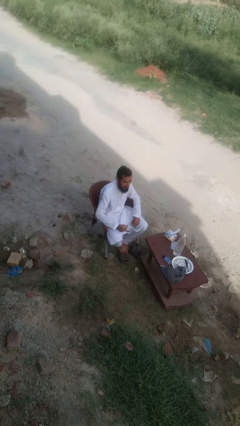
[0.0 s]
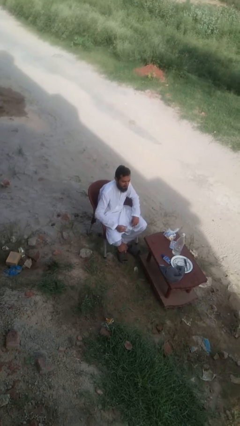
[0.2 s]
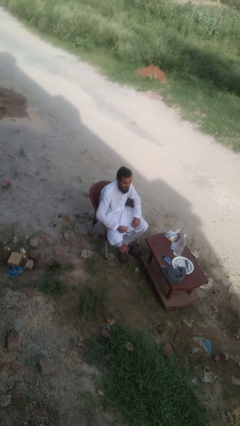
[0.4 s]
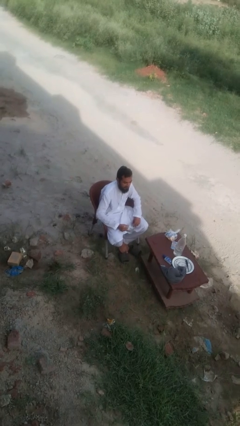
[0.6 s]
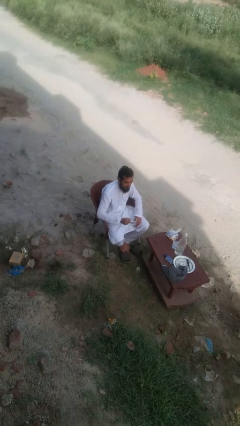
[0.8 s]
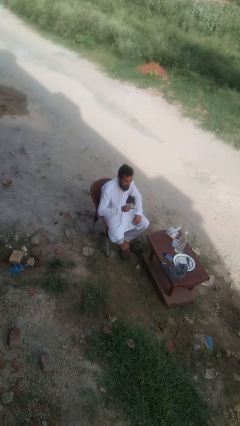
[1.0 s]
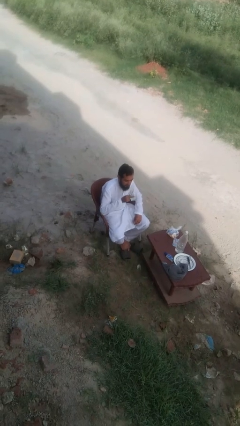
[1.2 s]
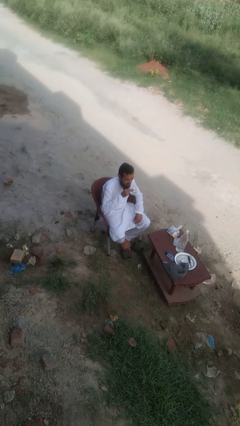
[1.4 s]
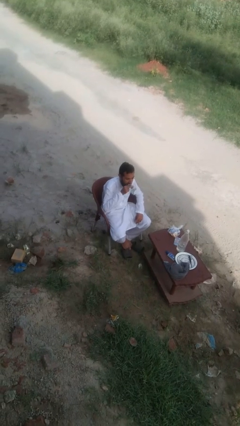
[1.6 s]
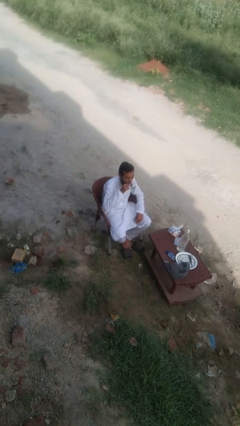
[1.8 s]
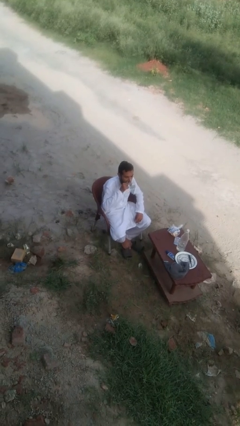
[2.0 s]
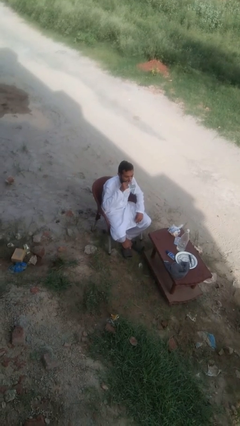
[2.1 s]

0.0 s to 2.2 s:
person drinks from mug

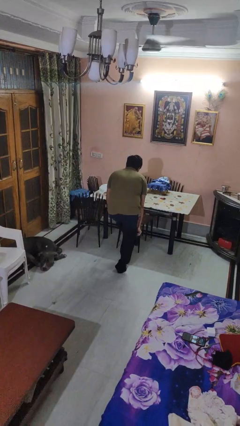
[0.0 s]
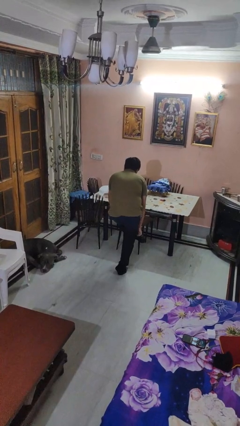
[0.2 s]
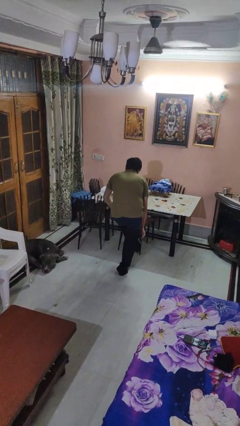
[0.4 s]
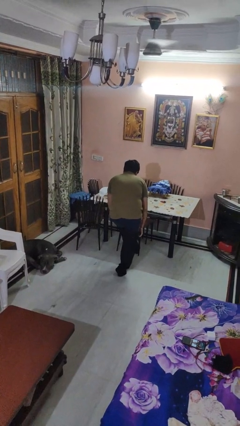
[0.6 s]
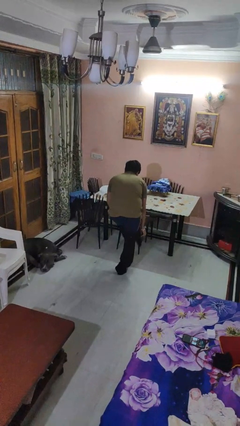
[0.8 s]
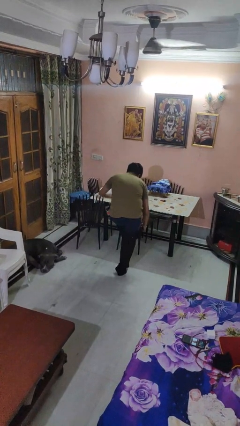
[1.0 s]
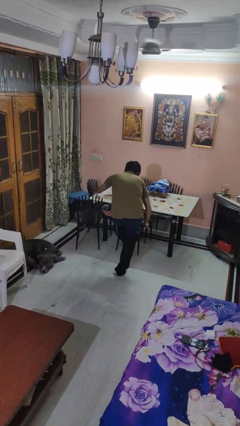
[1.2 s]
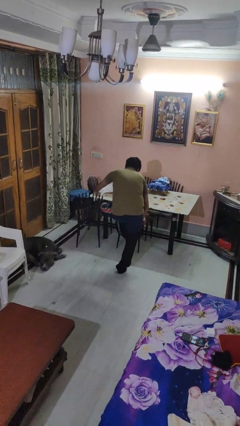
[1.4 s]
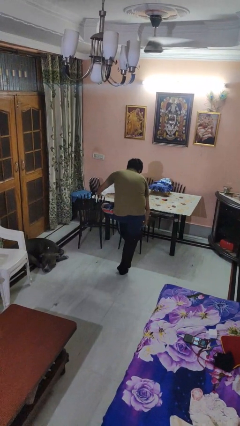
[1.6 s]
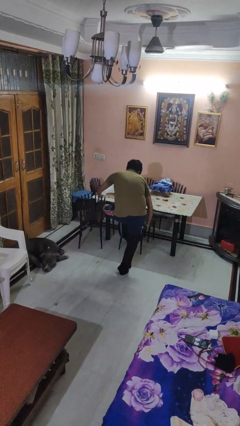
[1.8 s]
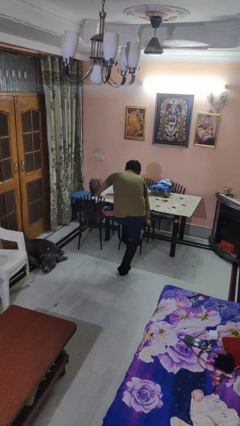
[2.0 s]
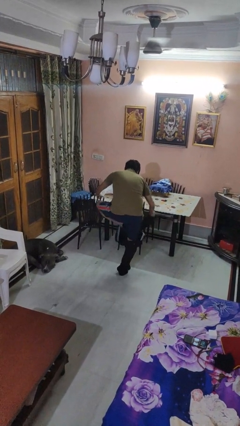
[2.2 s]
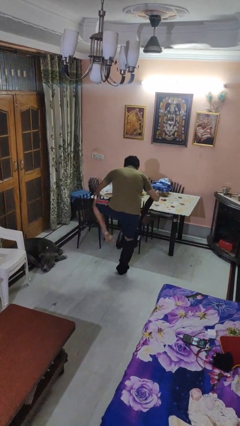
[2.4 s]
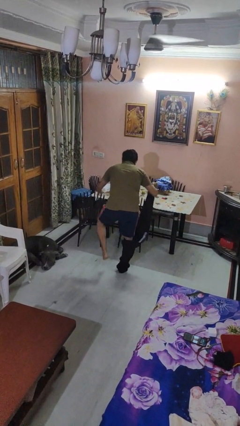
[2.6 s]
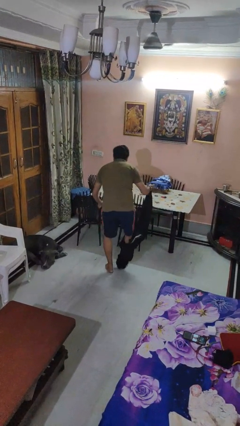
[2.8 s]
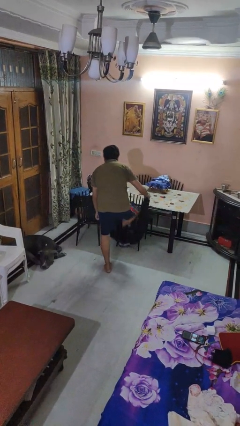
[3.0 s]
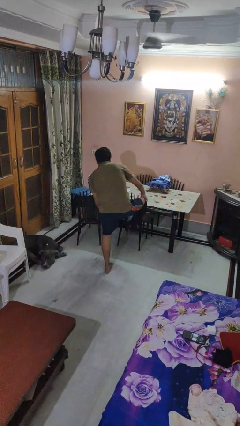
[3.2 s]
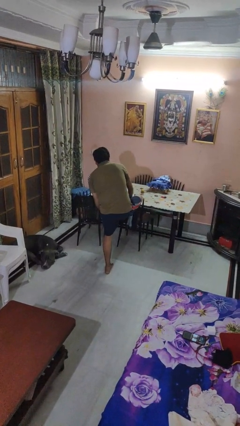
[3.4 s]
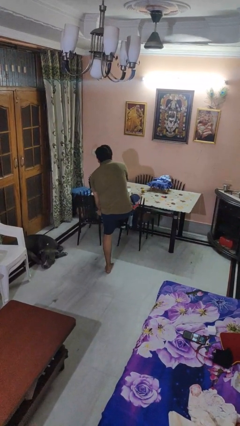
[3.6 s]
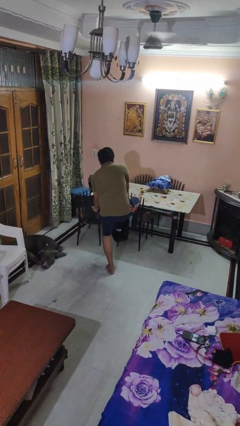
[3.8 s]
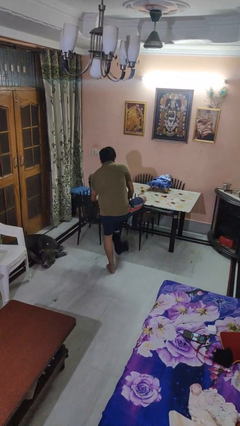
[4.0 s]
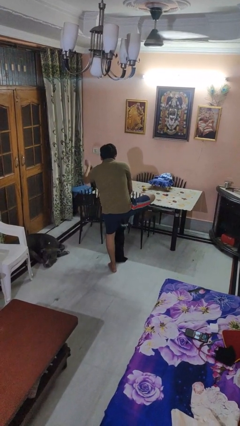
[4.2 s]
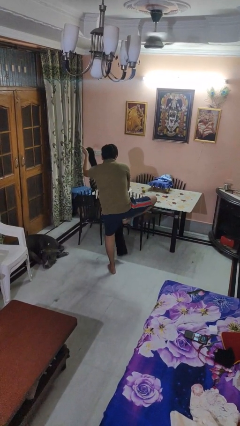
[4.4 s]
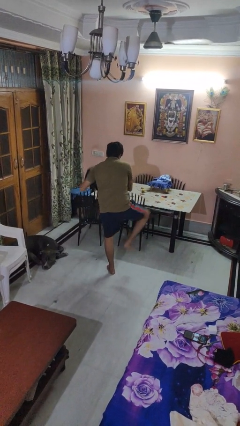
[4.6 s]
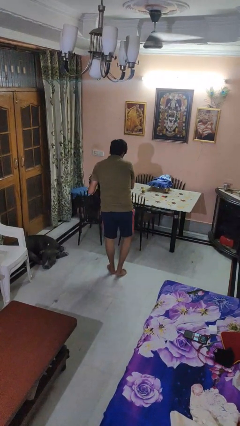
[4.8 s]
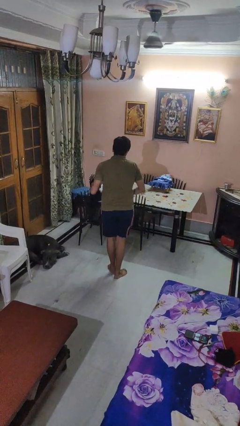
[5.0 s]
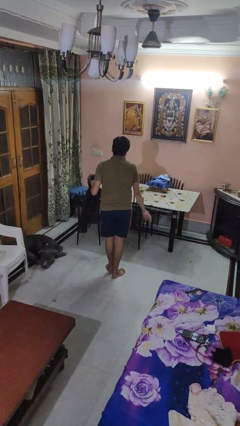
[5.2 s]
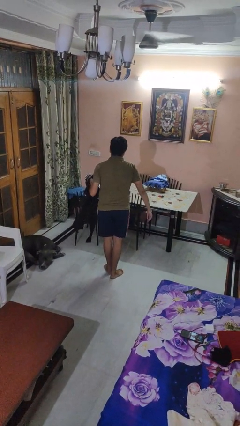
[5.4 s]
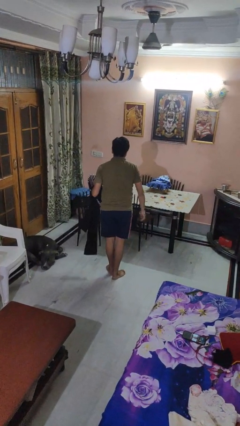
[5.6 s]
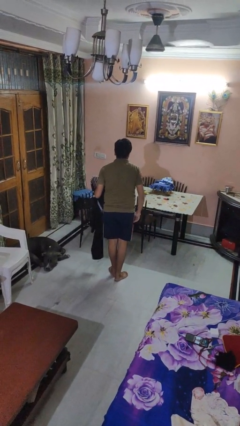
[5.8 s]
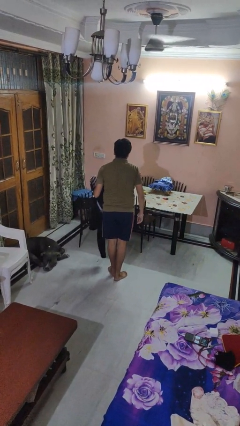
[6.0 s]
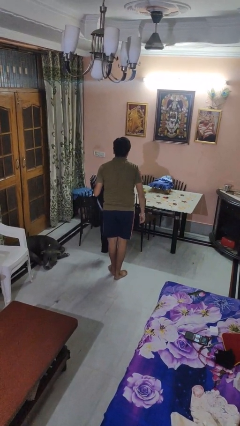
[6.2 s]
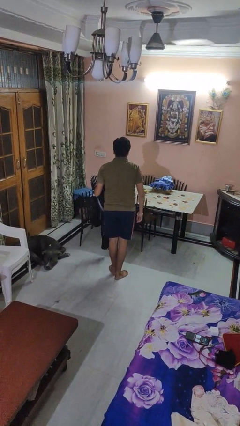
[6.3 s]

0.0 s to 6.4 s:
person takes off pants

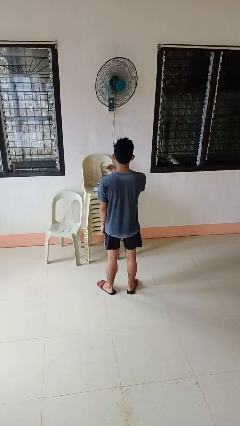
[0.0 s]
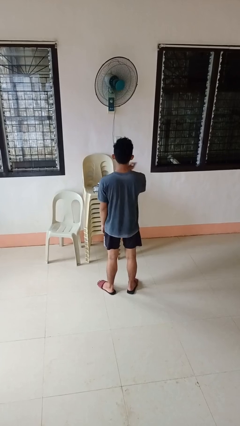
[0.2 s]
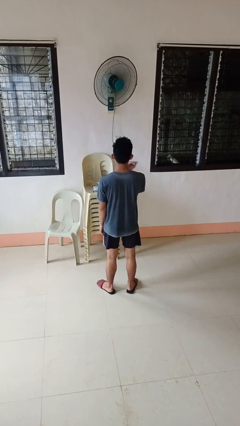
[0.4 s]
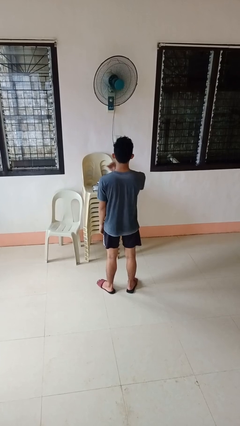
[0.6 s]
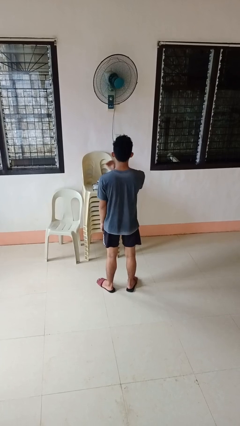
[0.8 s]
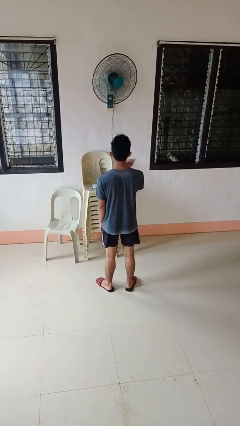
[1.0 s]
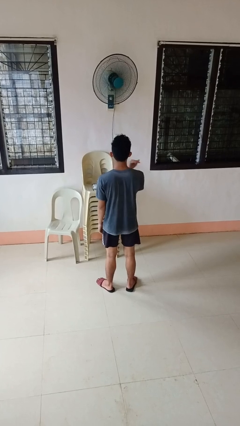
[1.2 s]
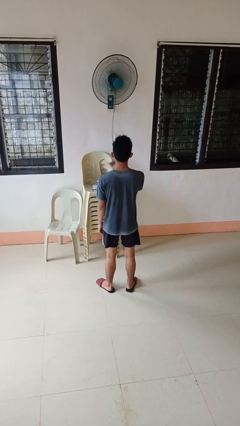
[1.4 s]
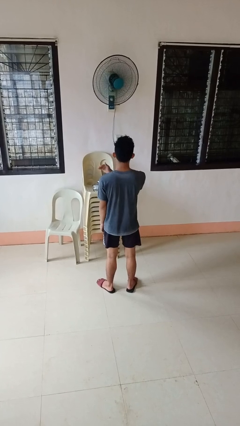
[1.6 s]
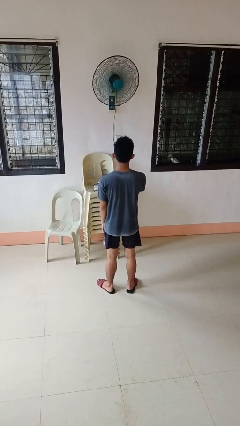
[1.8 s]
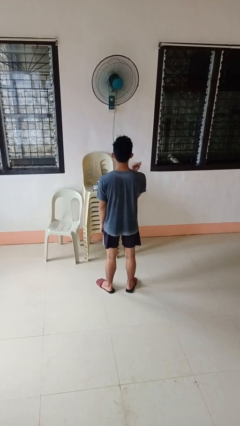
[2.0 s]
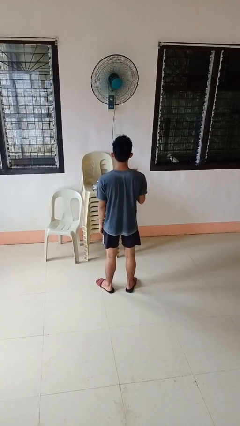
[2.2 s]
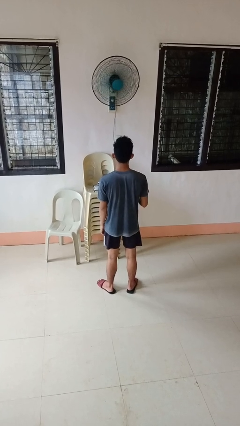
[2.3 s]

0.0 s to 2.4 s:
person gestures cut

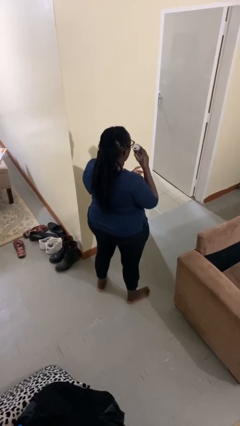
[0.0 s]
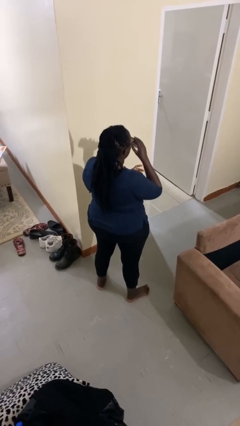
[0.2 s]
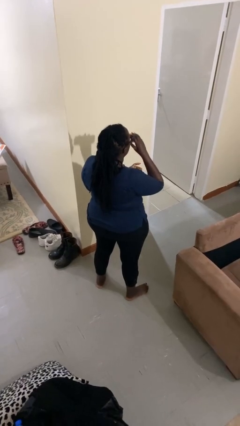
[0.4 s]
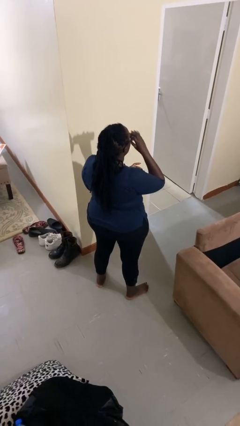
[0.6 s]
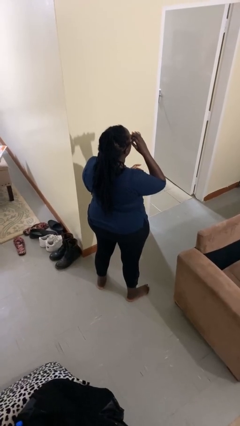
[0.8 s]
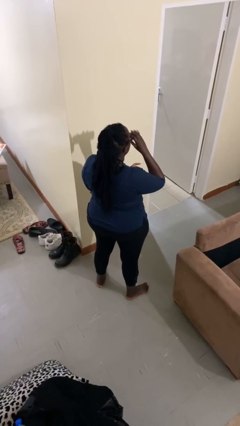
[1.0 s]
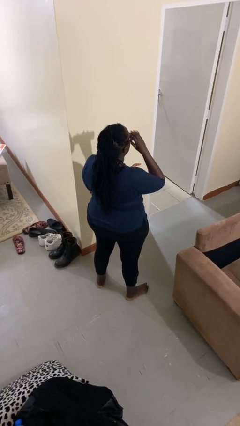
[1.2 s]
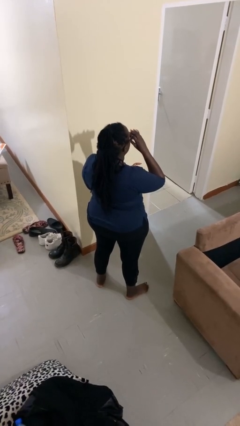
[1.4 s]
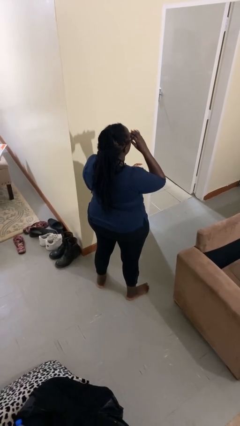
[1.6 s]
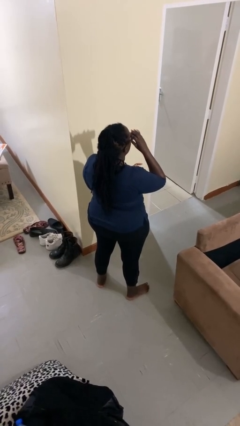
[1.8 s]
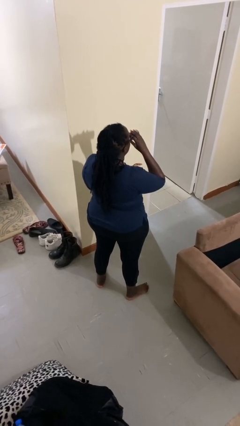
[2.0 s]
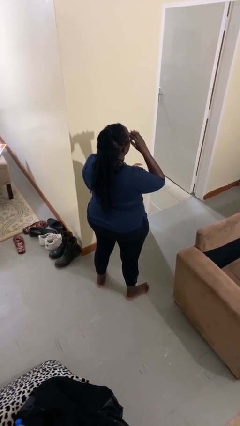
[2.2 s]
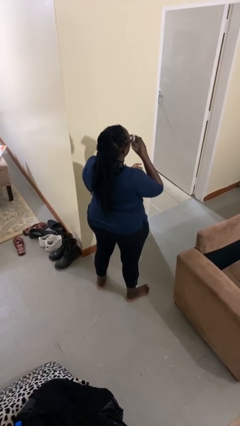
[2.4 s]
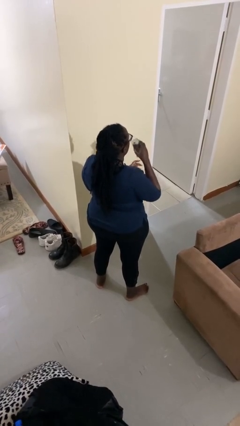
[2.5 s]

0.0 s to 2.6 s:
person drinks from beverage can

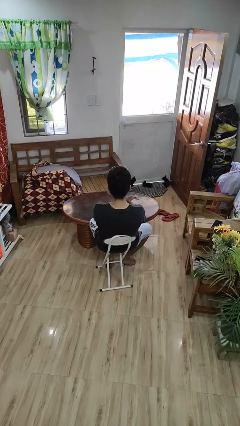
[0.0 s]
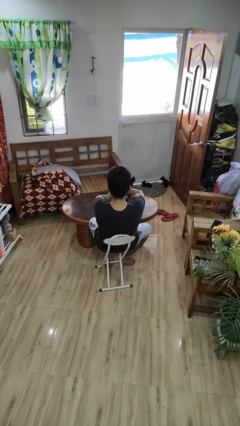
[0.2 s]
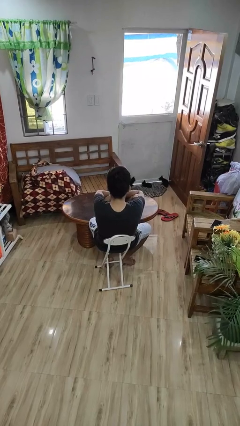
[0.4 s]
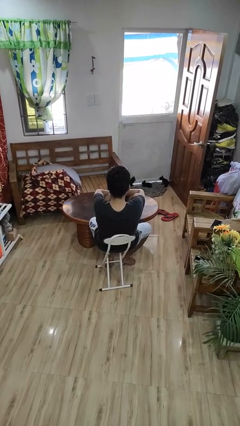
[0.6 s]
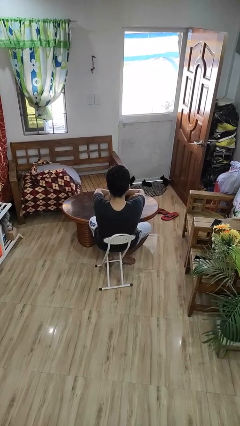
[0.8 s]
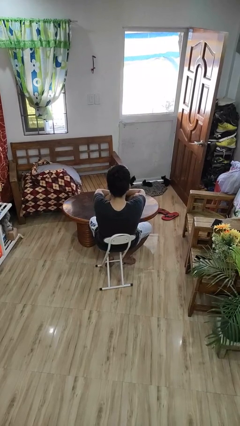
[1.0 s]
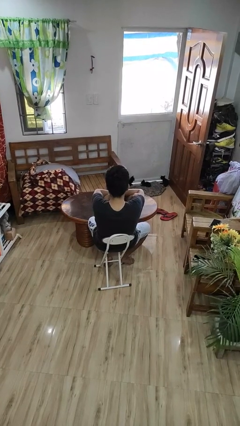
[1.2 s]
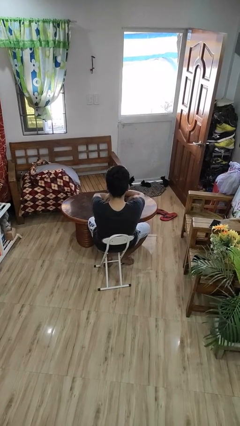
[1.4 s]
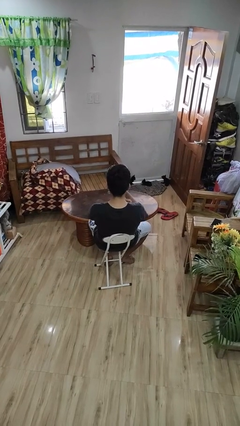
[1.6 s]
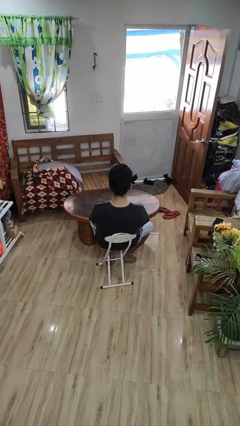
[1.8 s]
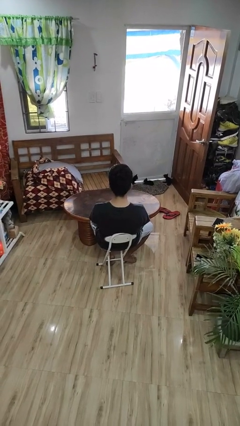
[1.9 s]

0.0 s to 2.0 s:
person crosses arms

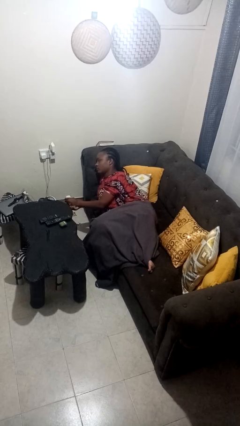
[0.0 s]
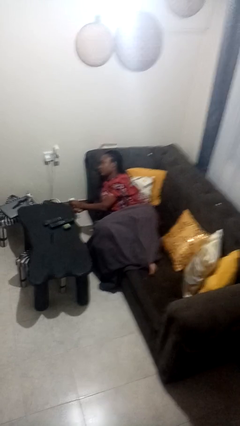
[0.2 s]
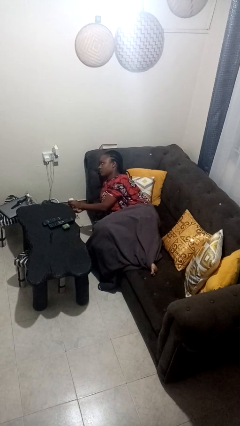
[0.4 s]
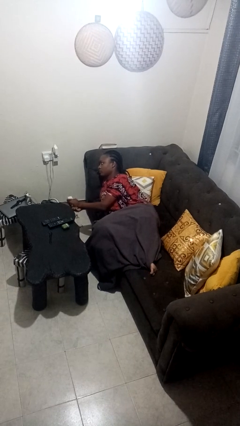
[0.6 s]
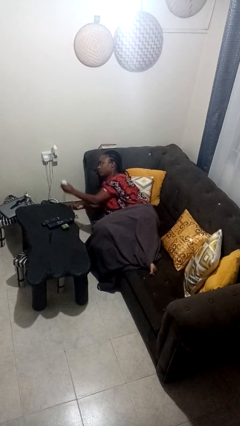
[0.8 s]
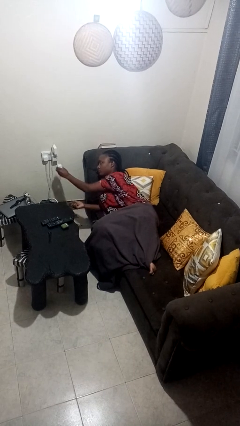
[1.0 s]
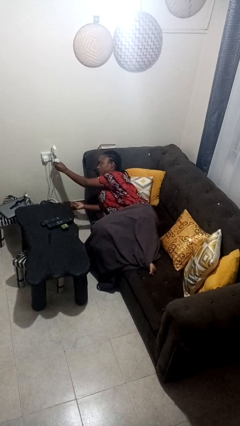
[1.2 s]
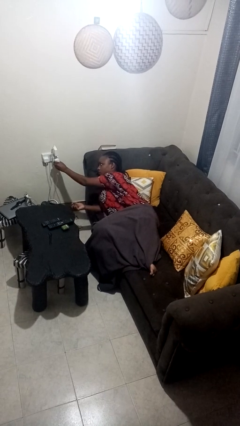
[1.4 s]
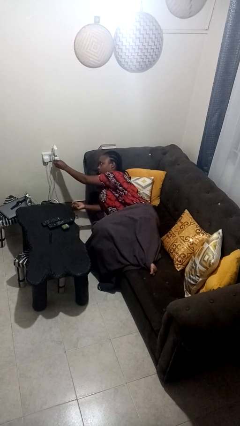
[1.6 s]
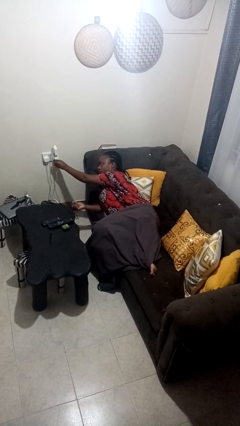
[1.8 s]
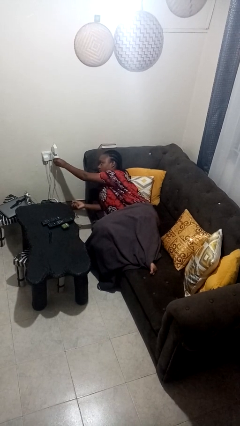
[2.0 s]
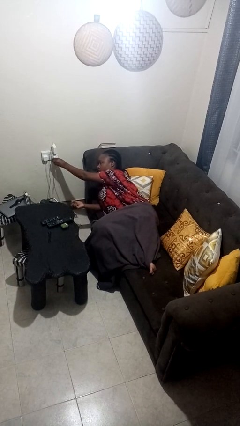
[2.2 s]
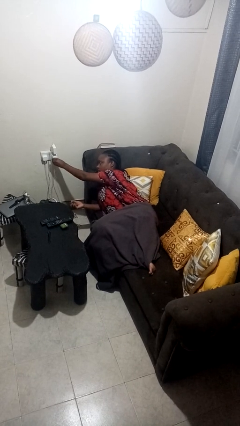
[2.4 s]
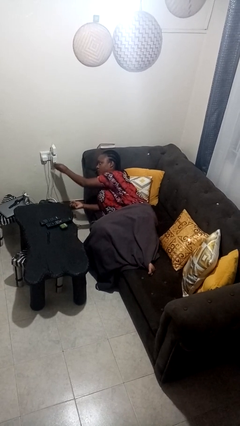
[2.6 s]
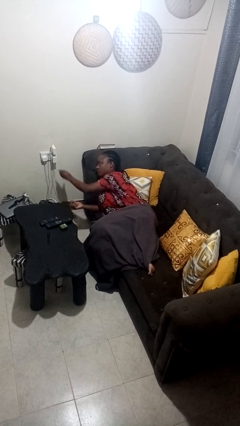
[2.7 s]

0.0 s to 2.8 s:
person plugs into electrical socket
